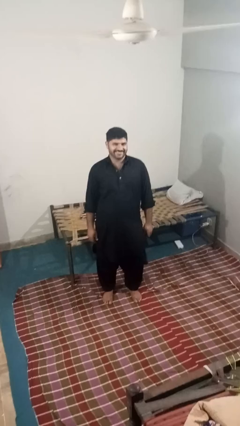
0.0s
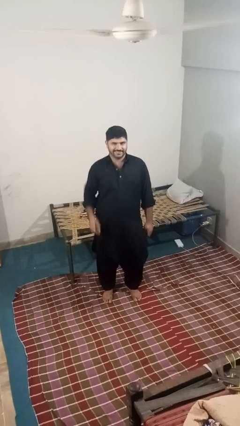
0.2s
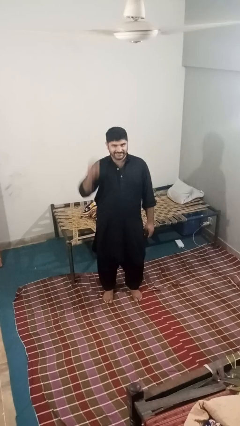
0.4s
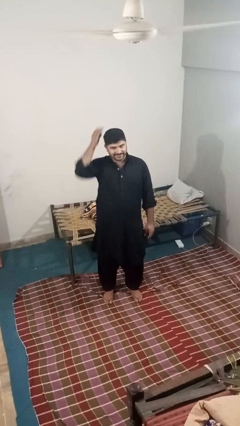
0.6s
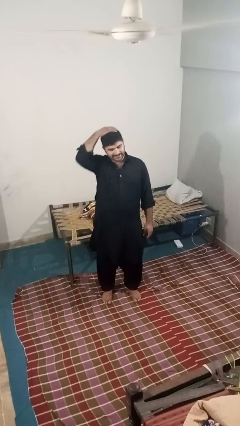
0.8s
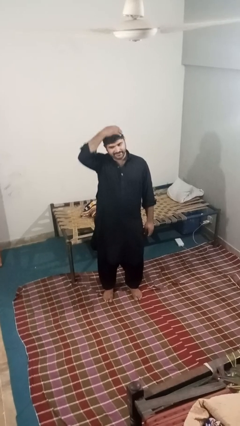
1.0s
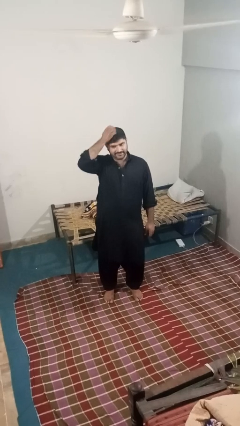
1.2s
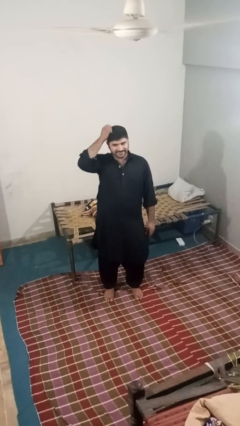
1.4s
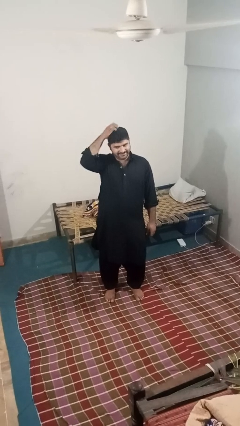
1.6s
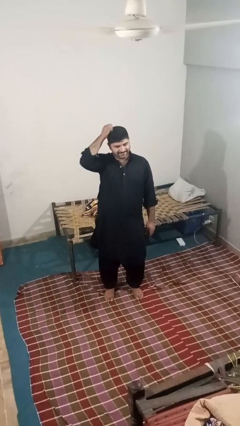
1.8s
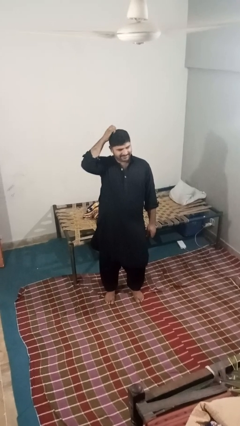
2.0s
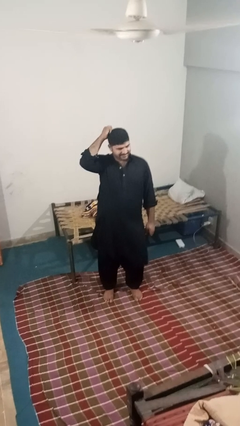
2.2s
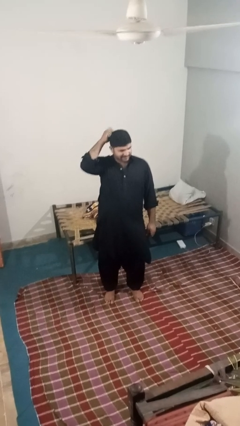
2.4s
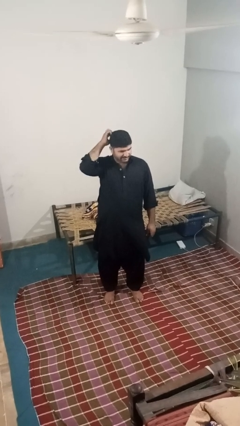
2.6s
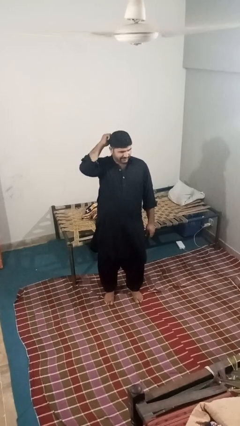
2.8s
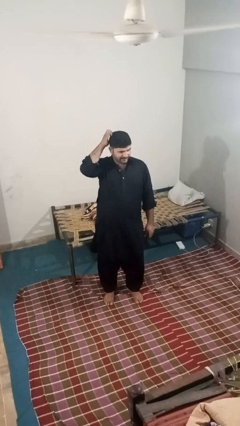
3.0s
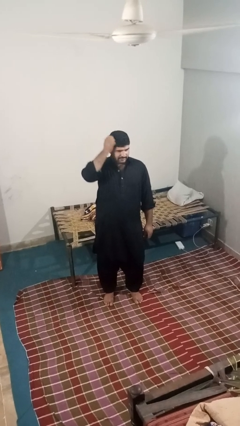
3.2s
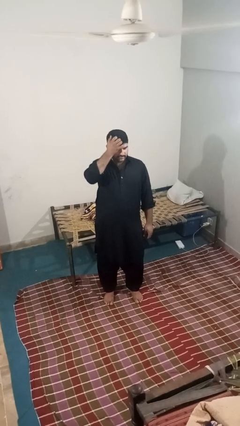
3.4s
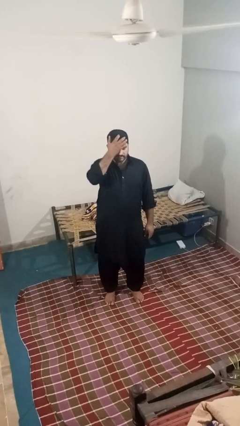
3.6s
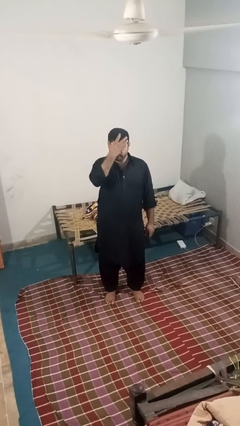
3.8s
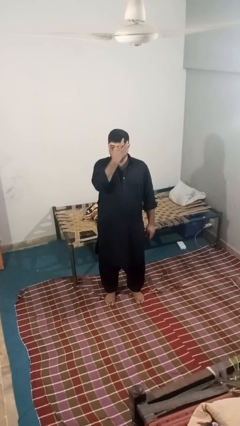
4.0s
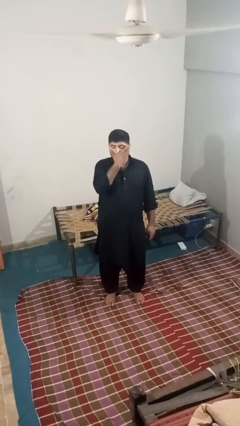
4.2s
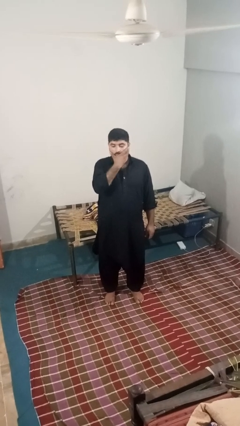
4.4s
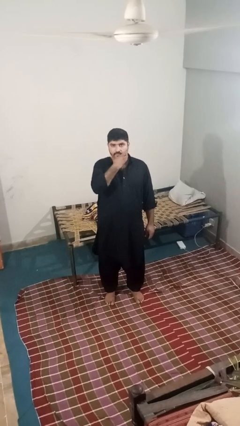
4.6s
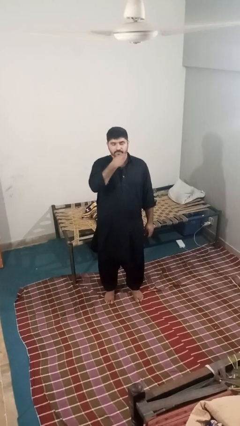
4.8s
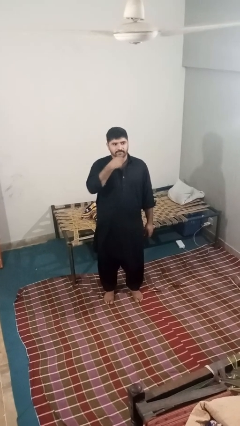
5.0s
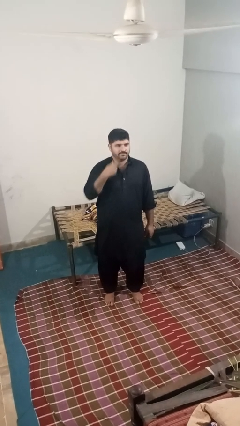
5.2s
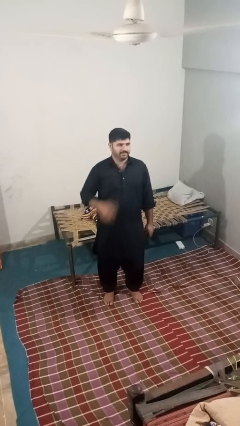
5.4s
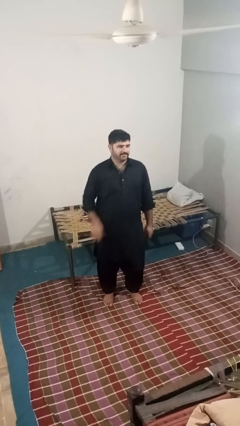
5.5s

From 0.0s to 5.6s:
person scratches face

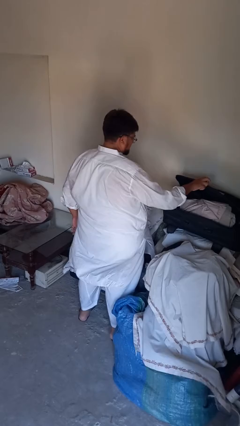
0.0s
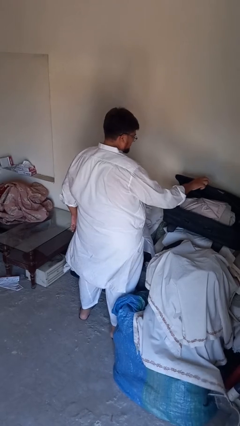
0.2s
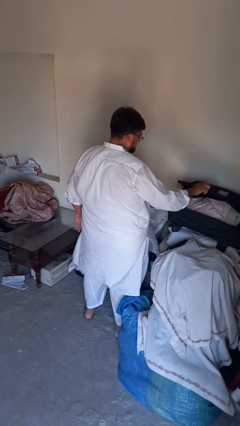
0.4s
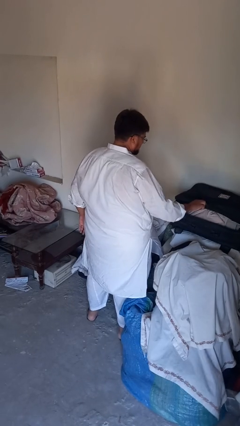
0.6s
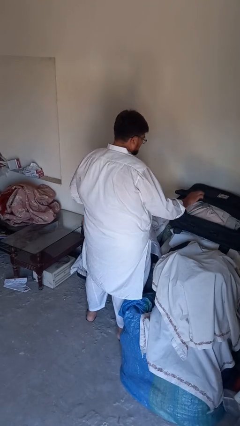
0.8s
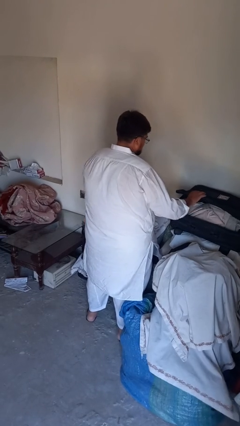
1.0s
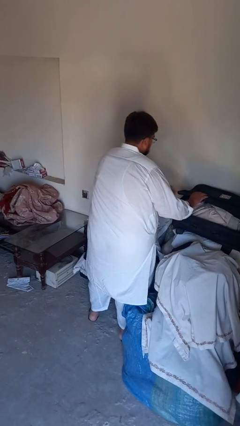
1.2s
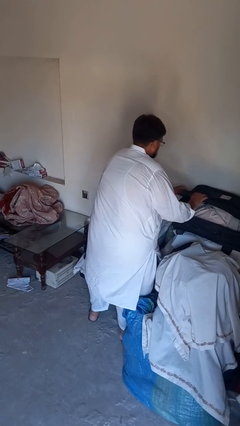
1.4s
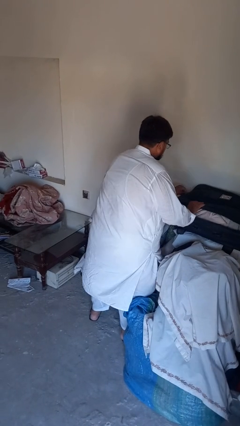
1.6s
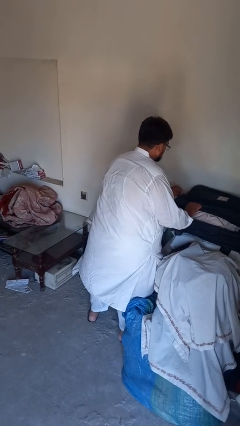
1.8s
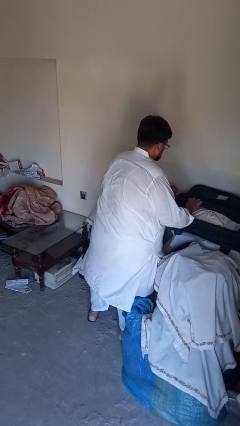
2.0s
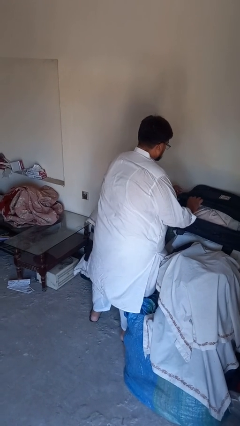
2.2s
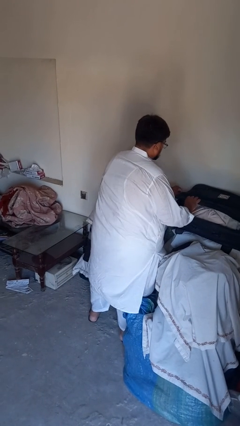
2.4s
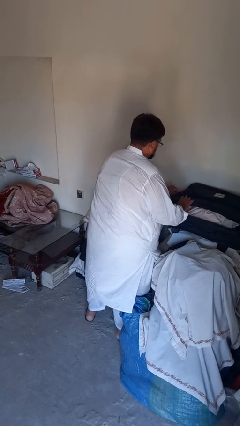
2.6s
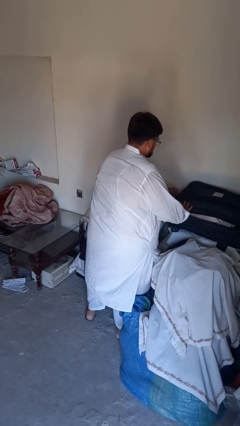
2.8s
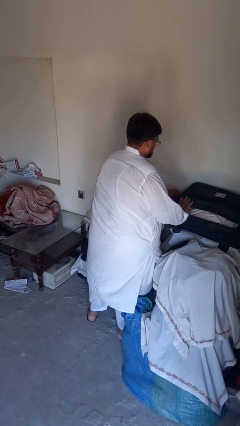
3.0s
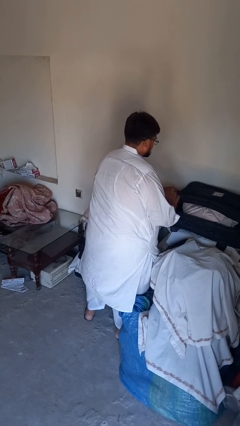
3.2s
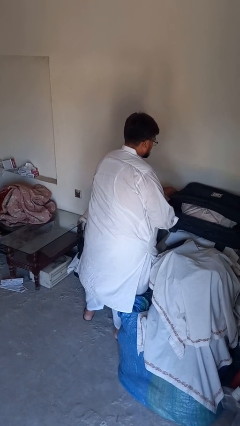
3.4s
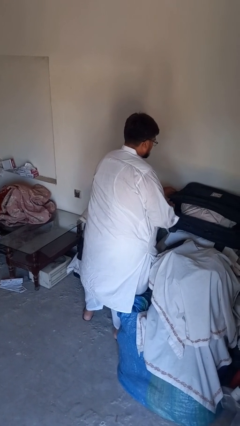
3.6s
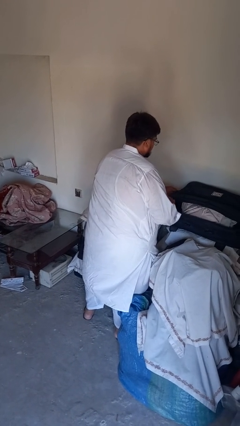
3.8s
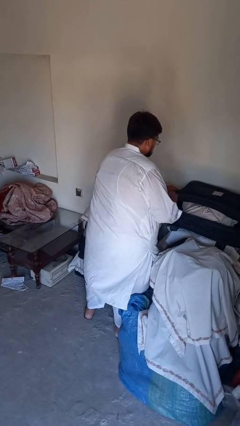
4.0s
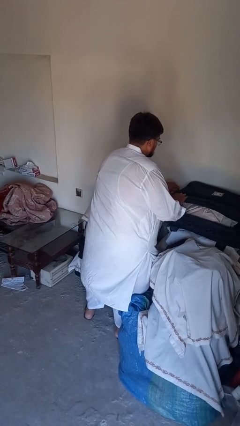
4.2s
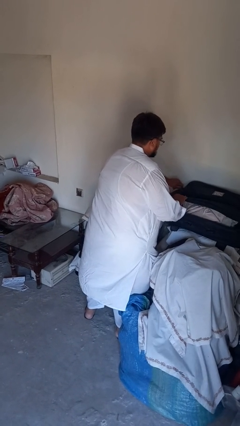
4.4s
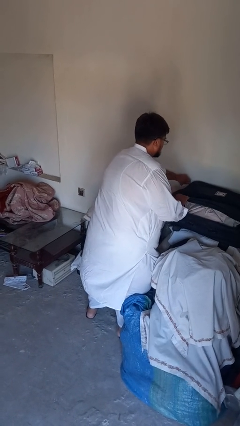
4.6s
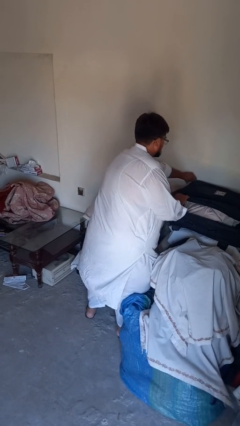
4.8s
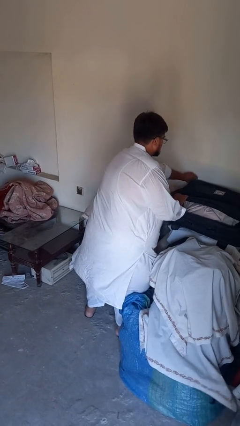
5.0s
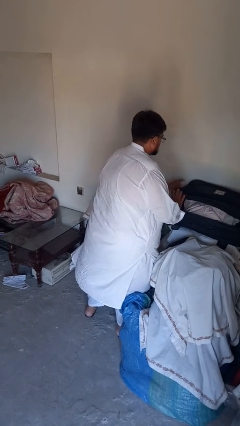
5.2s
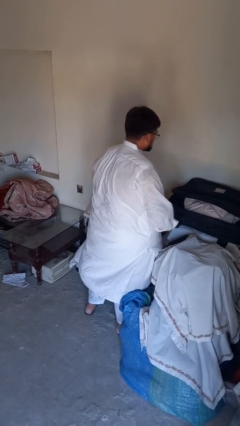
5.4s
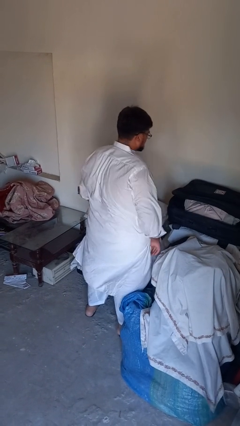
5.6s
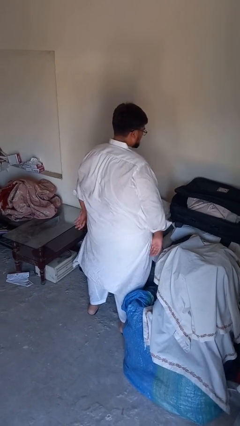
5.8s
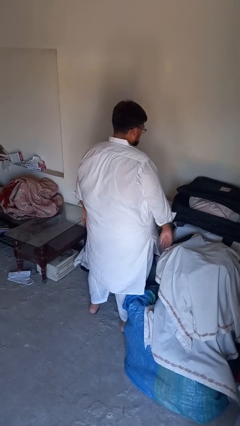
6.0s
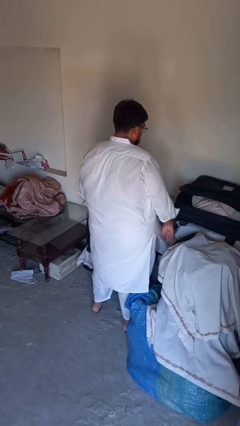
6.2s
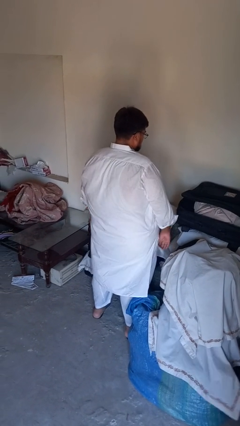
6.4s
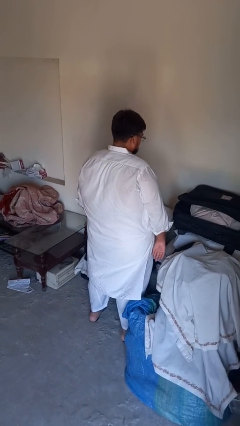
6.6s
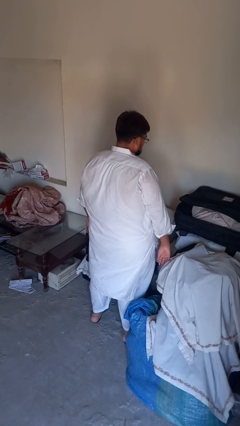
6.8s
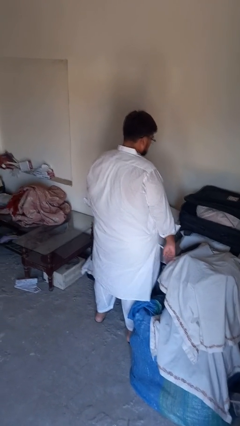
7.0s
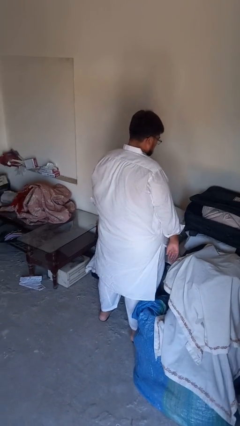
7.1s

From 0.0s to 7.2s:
person closes suitcase

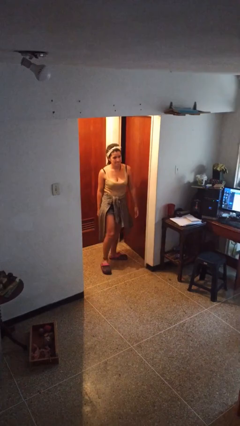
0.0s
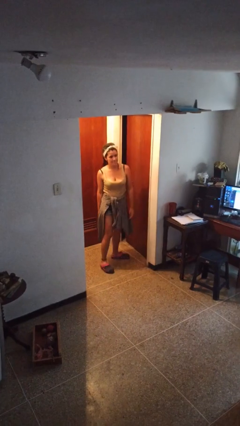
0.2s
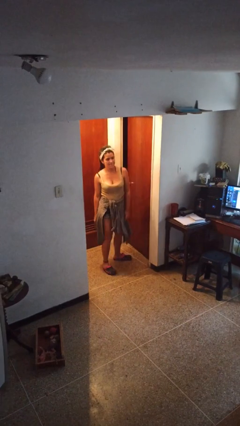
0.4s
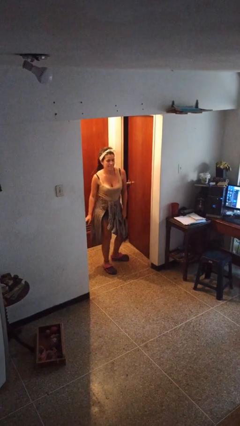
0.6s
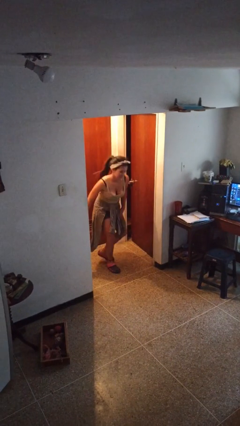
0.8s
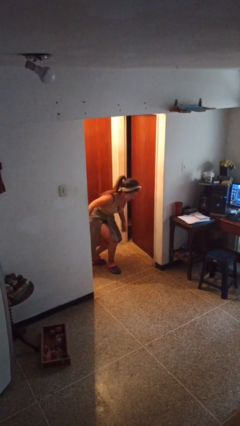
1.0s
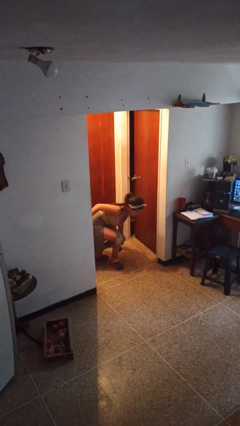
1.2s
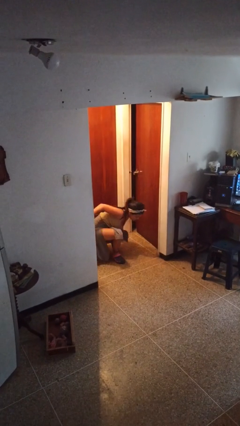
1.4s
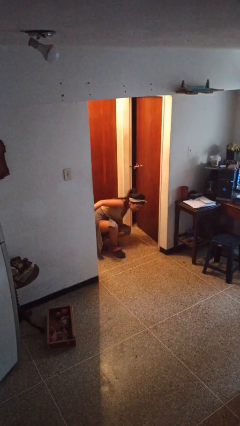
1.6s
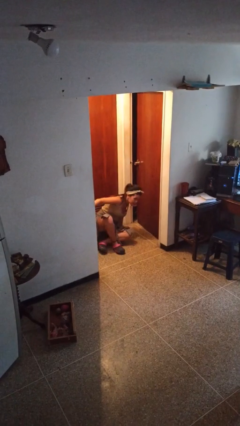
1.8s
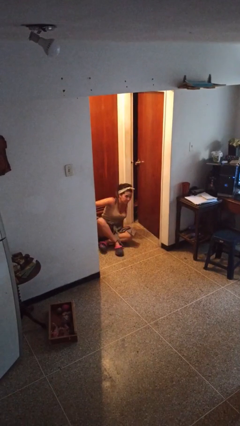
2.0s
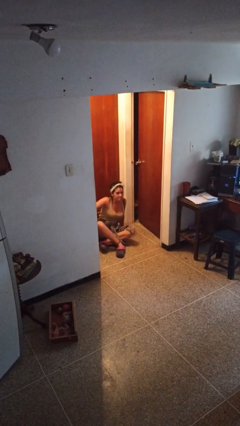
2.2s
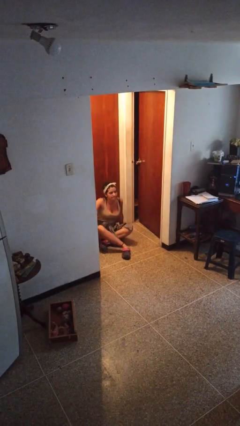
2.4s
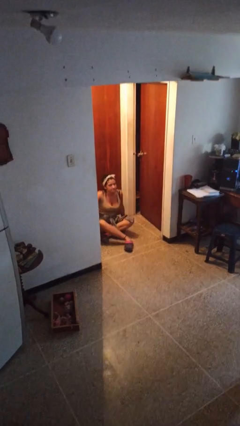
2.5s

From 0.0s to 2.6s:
person sits down

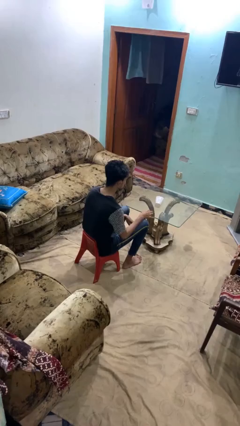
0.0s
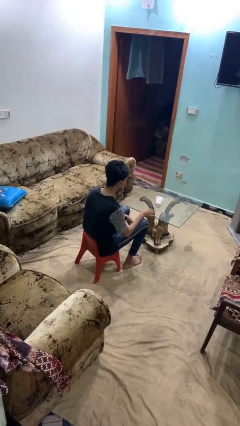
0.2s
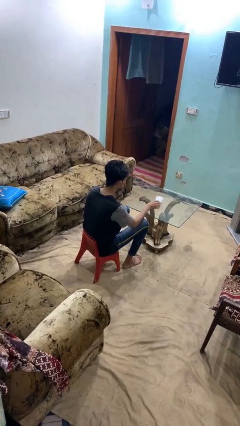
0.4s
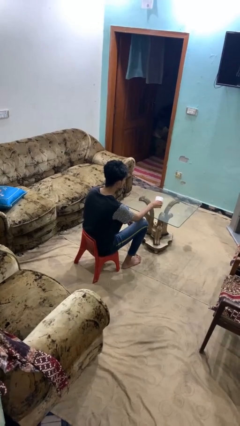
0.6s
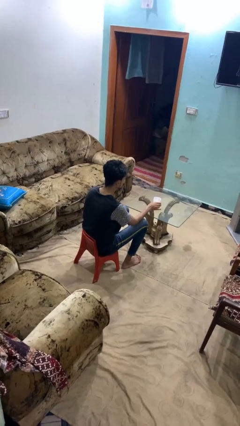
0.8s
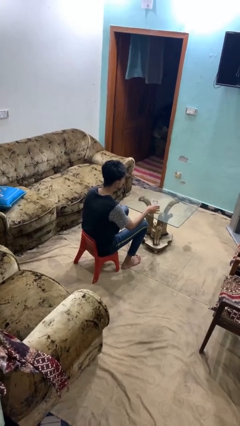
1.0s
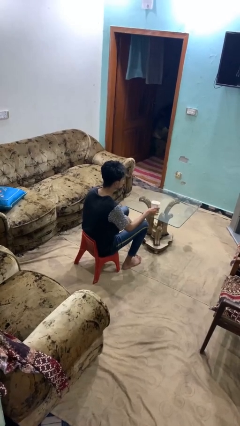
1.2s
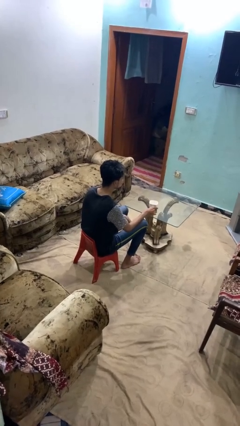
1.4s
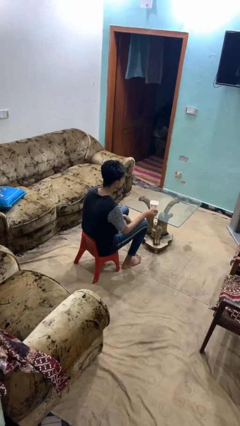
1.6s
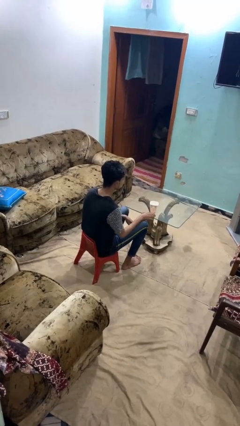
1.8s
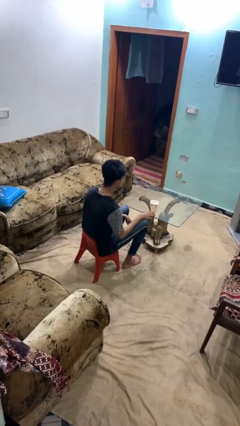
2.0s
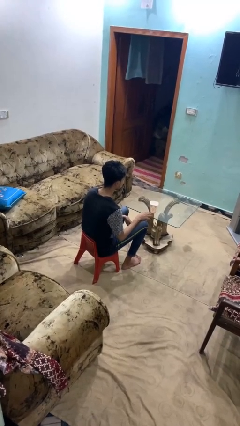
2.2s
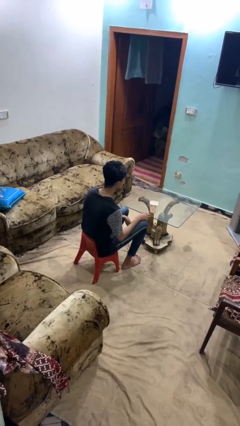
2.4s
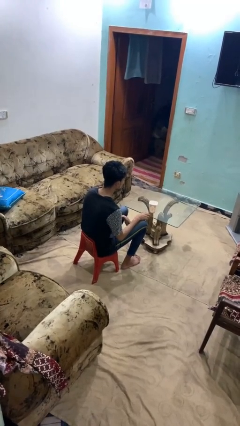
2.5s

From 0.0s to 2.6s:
person sets upright glass
